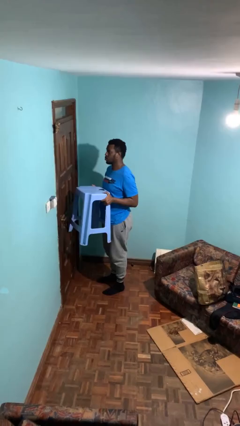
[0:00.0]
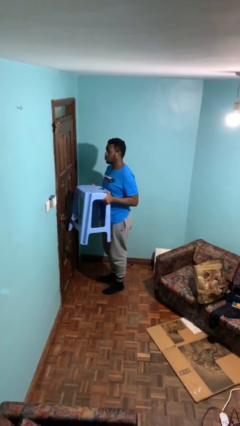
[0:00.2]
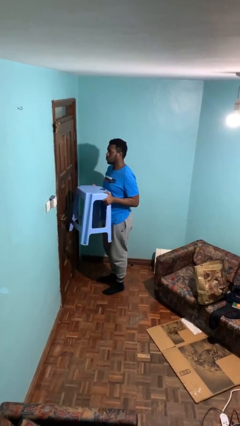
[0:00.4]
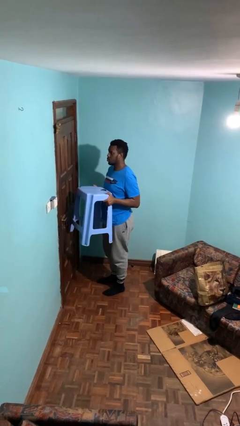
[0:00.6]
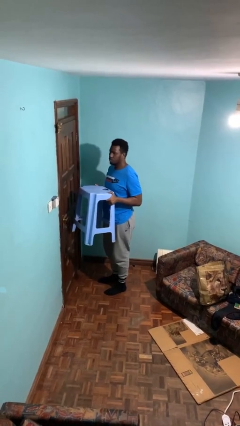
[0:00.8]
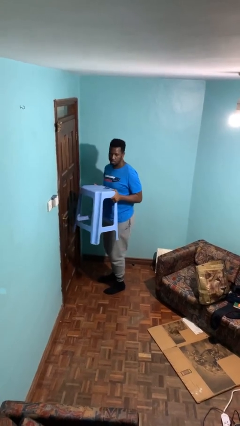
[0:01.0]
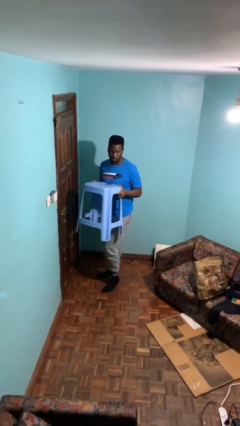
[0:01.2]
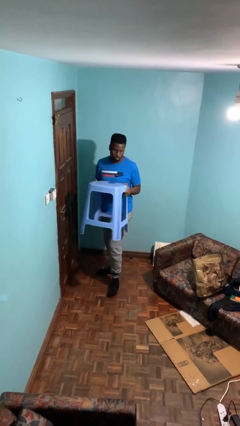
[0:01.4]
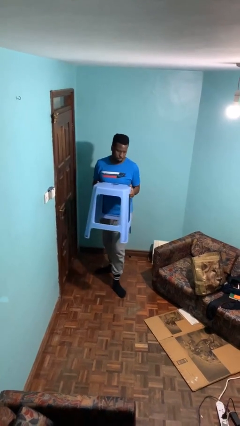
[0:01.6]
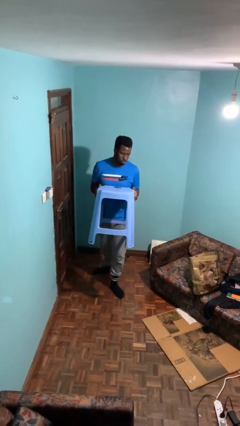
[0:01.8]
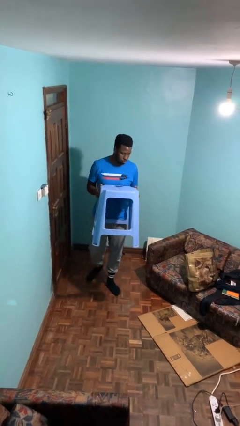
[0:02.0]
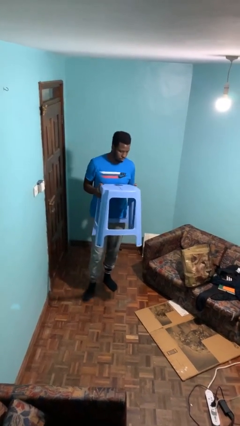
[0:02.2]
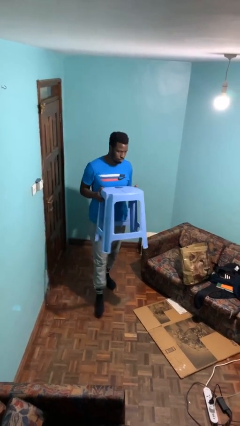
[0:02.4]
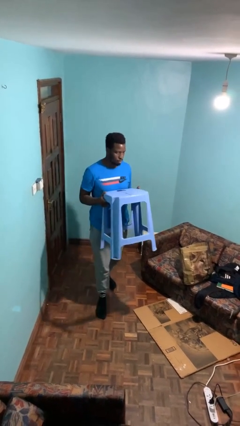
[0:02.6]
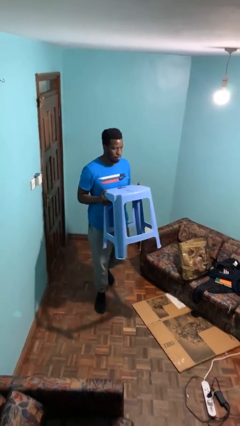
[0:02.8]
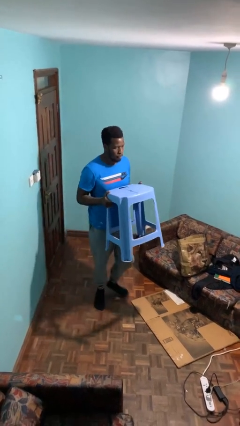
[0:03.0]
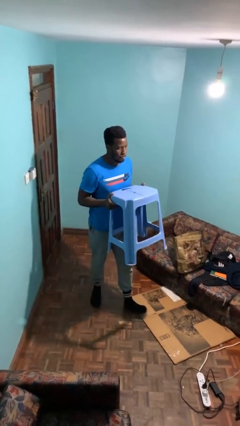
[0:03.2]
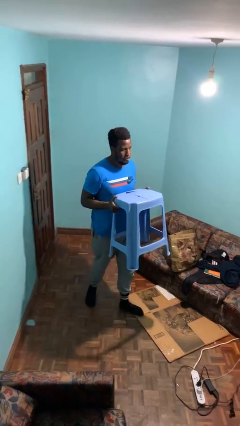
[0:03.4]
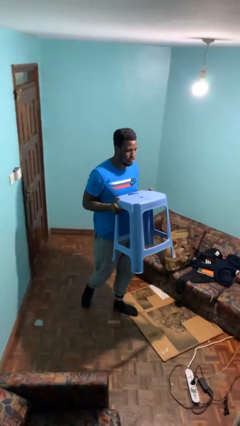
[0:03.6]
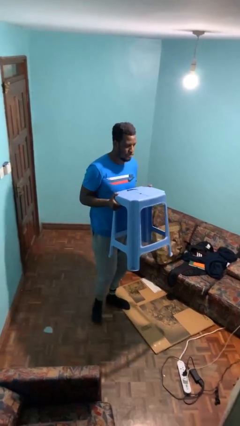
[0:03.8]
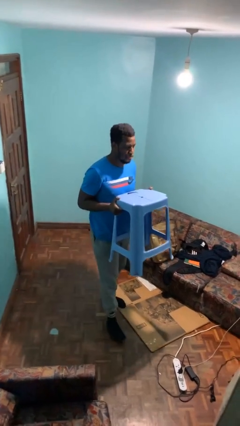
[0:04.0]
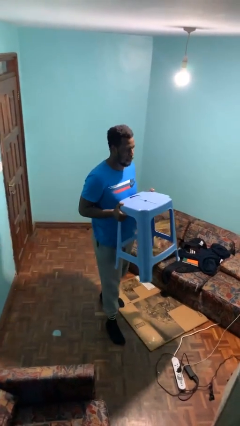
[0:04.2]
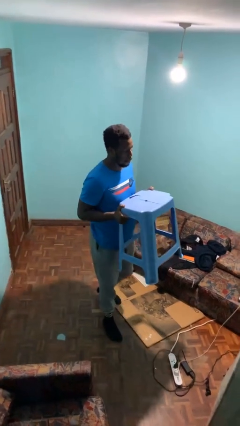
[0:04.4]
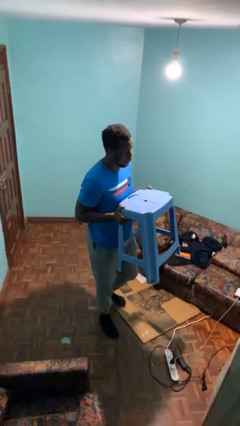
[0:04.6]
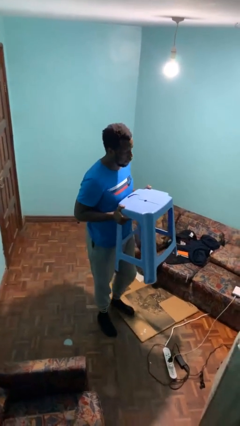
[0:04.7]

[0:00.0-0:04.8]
person carries furniture

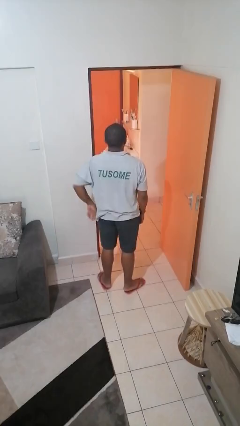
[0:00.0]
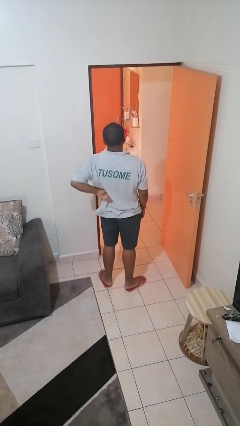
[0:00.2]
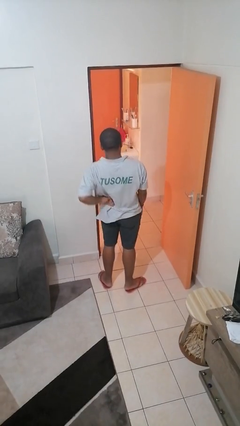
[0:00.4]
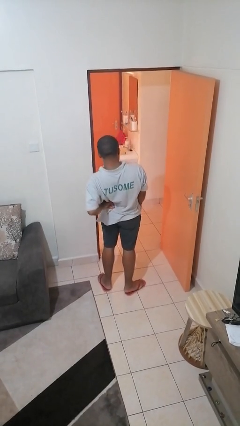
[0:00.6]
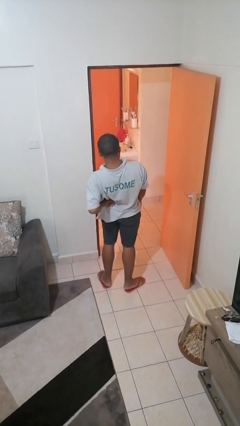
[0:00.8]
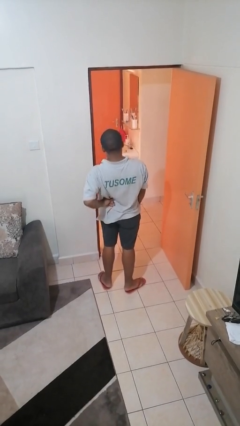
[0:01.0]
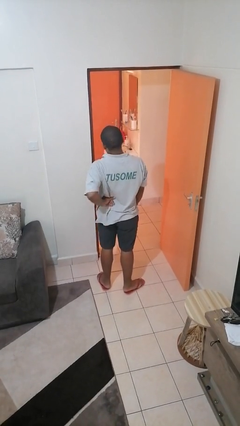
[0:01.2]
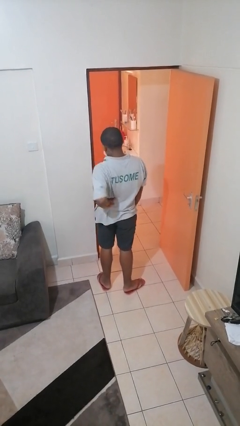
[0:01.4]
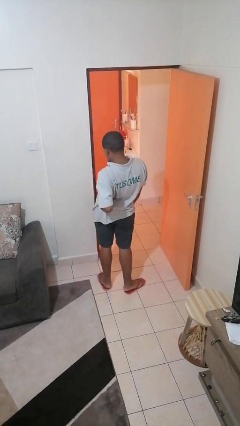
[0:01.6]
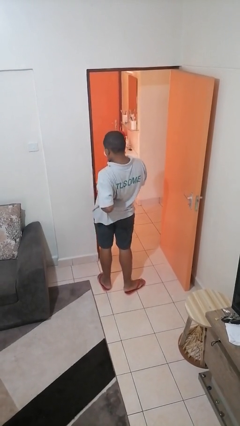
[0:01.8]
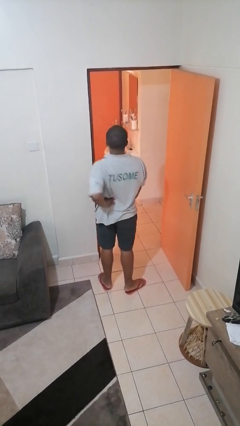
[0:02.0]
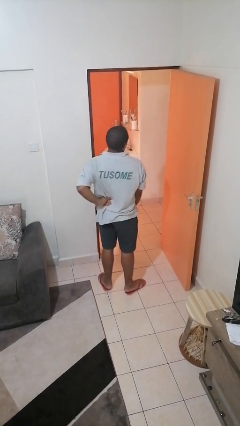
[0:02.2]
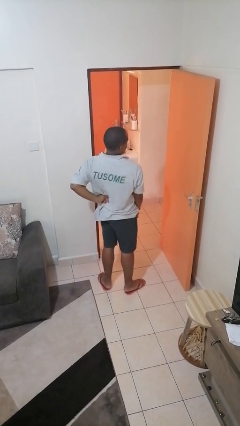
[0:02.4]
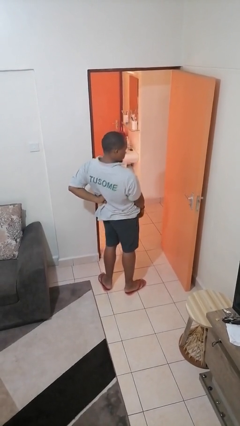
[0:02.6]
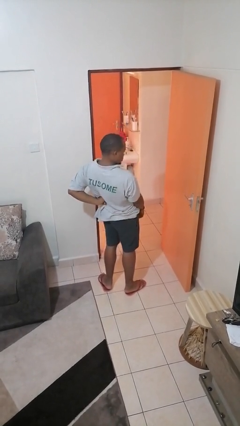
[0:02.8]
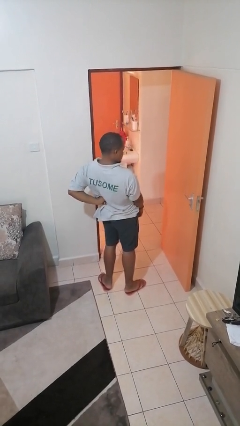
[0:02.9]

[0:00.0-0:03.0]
person stretches back

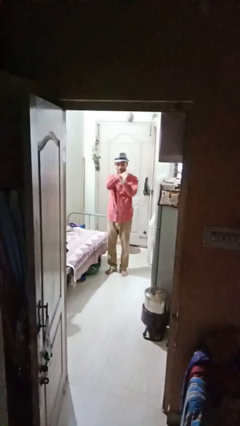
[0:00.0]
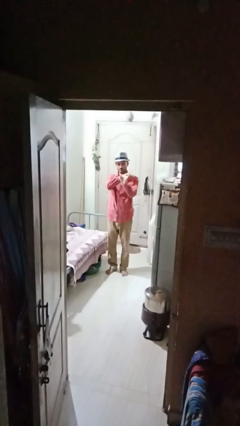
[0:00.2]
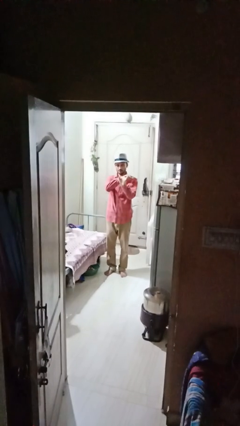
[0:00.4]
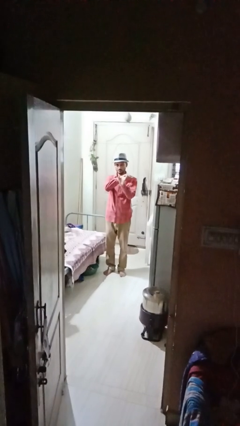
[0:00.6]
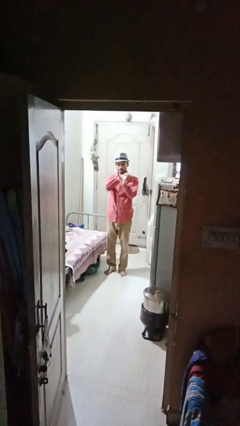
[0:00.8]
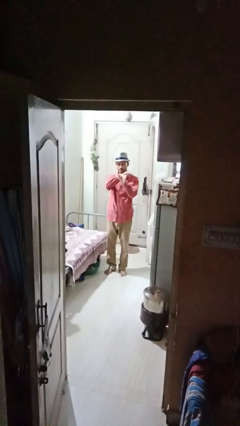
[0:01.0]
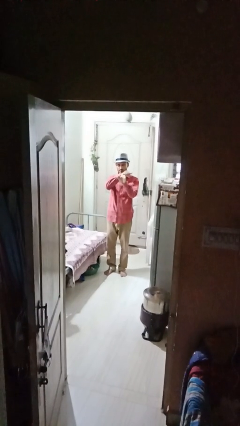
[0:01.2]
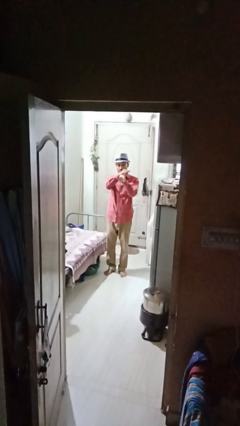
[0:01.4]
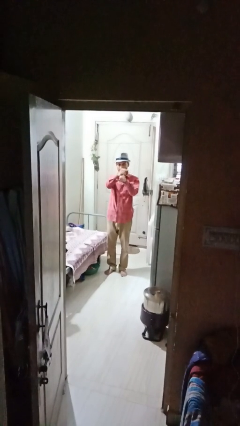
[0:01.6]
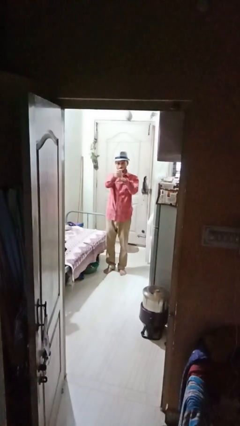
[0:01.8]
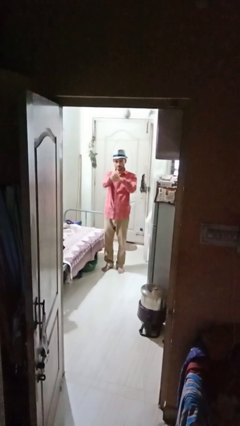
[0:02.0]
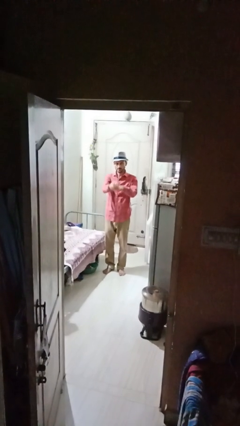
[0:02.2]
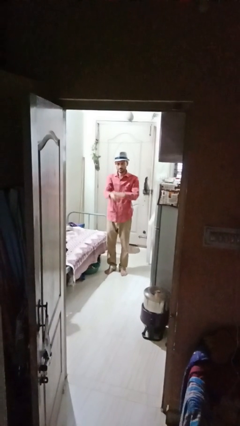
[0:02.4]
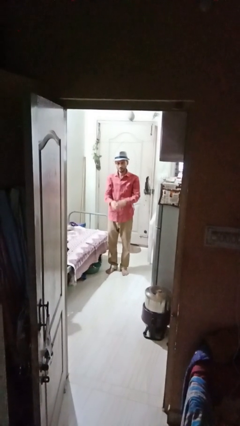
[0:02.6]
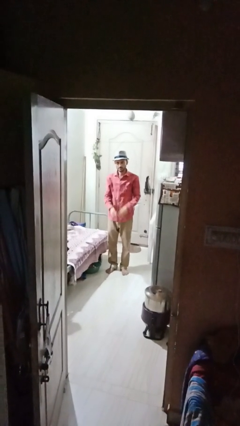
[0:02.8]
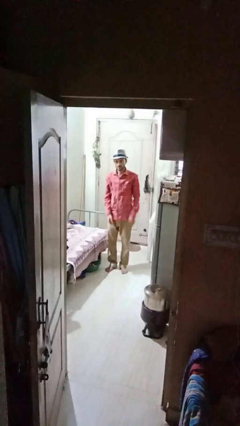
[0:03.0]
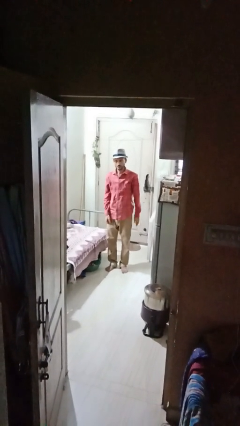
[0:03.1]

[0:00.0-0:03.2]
person cracks knuckles

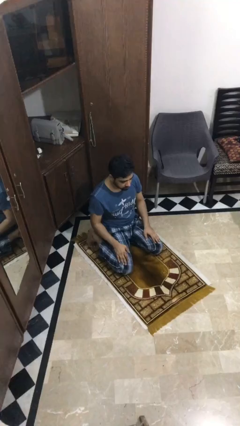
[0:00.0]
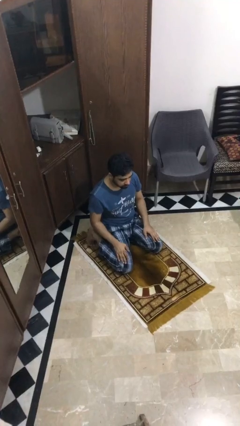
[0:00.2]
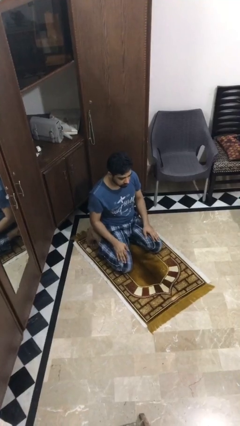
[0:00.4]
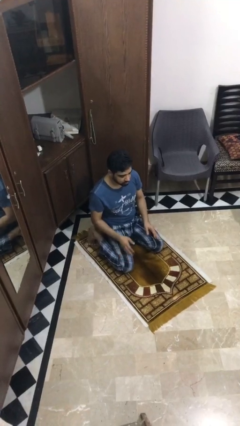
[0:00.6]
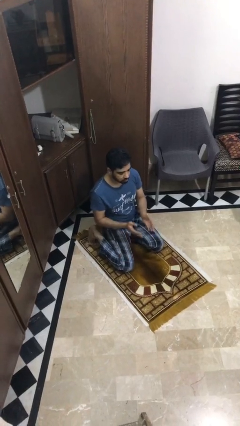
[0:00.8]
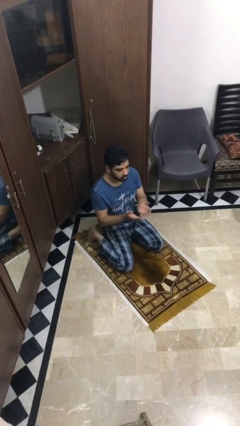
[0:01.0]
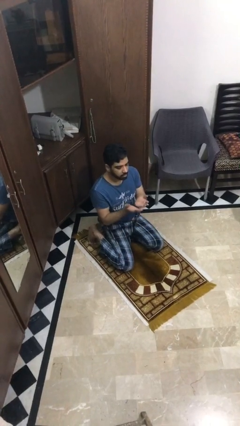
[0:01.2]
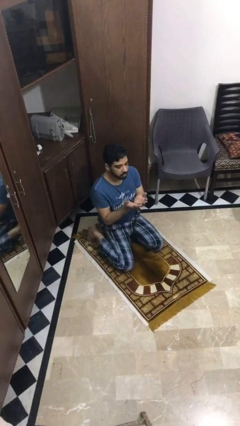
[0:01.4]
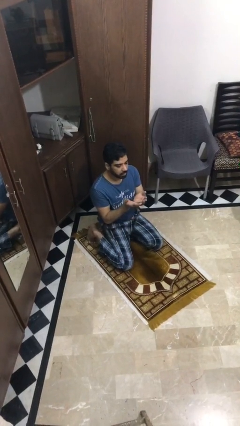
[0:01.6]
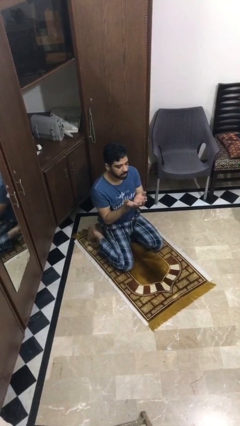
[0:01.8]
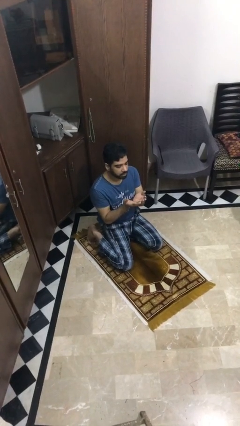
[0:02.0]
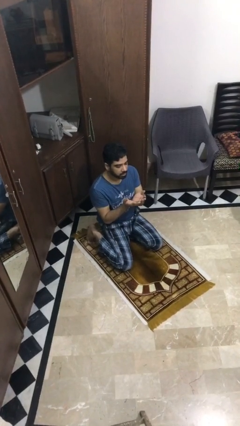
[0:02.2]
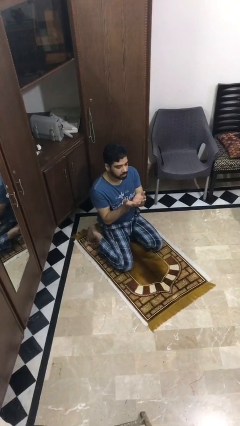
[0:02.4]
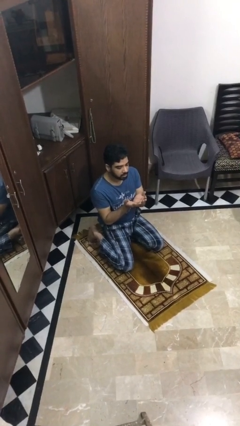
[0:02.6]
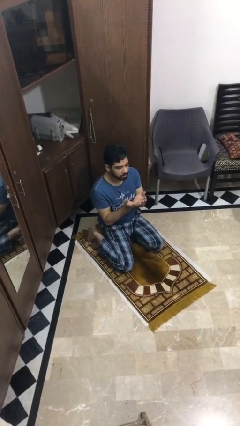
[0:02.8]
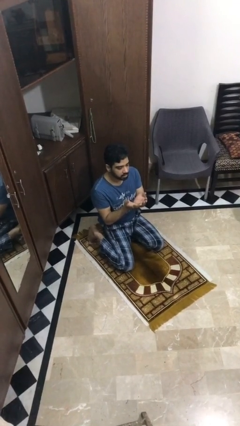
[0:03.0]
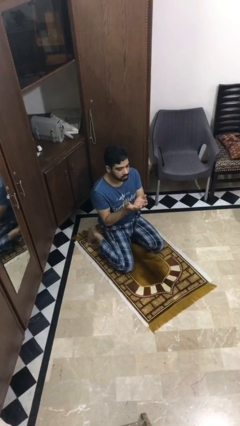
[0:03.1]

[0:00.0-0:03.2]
person prays

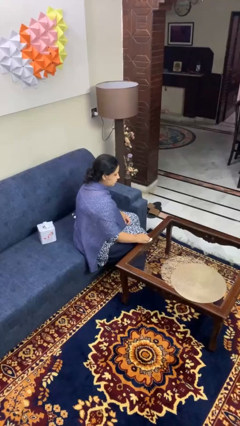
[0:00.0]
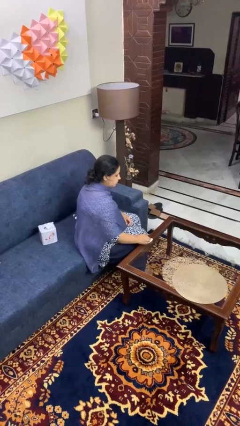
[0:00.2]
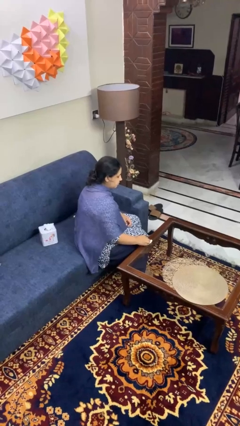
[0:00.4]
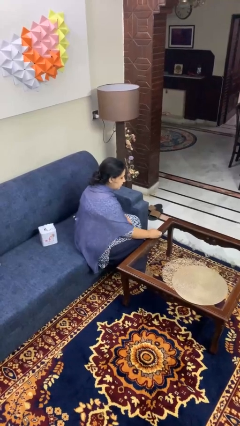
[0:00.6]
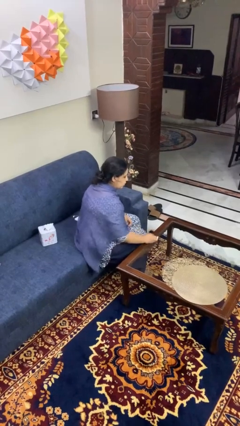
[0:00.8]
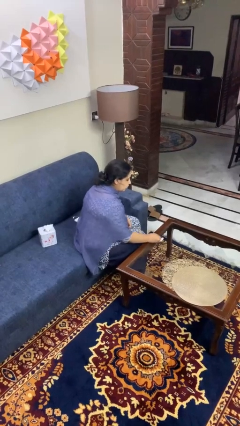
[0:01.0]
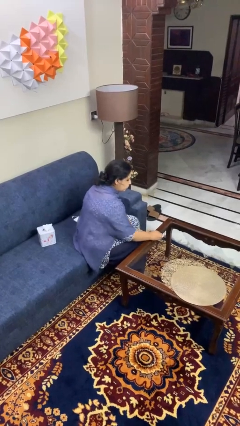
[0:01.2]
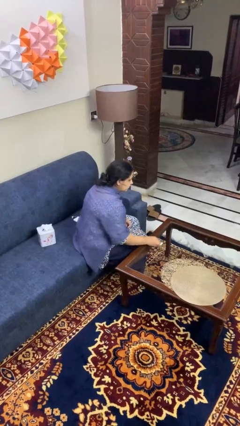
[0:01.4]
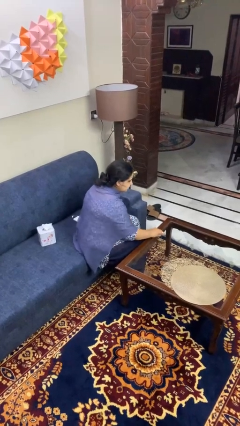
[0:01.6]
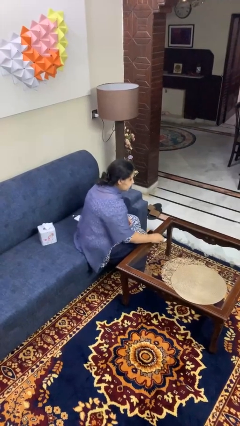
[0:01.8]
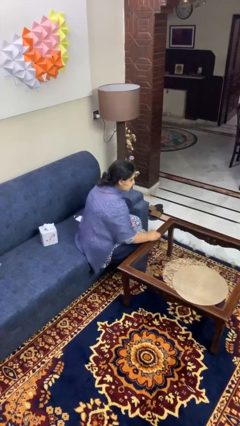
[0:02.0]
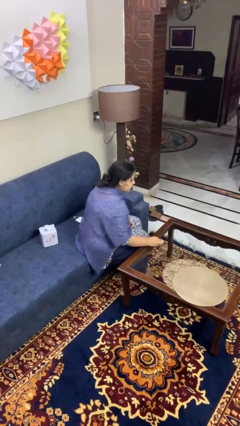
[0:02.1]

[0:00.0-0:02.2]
person cleans table with rag

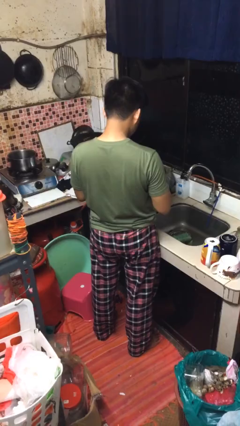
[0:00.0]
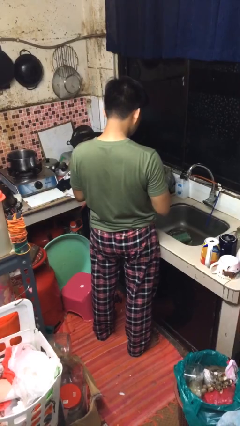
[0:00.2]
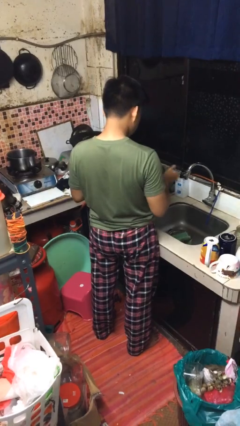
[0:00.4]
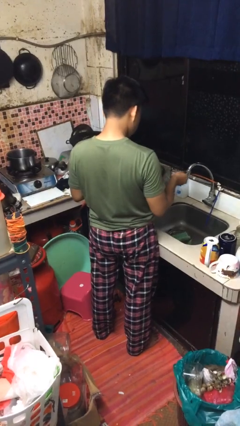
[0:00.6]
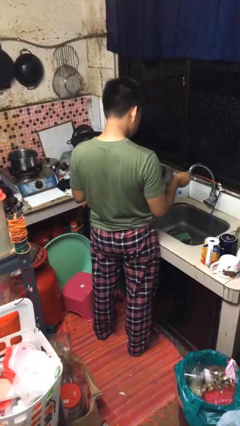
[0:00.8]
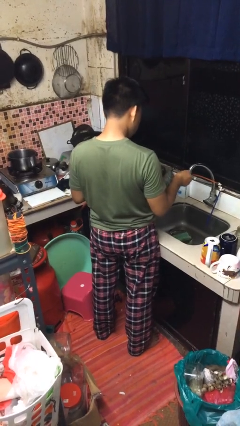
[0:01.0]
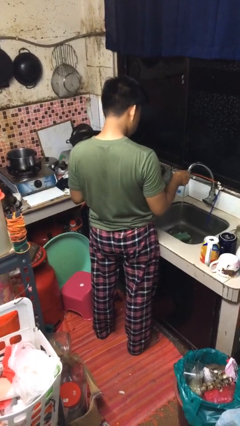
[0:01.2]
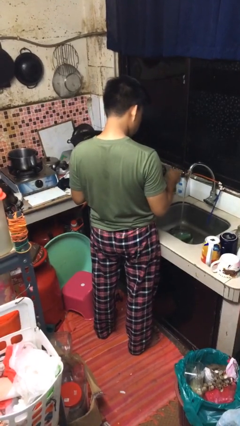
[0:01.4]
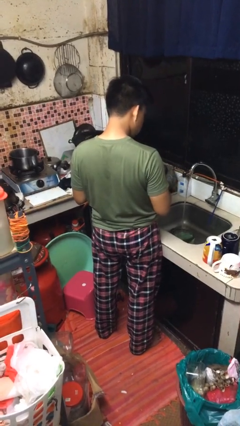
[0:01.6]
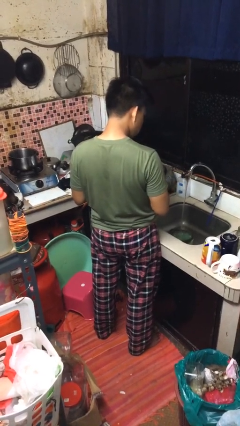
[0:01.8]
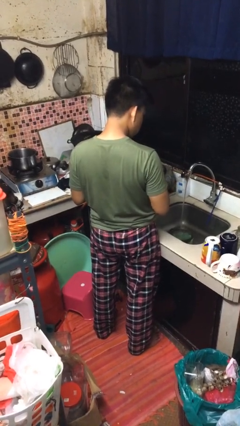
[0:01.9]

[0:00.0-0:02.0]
person turns on faucet
